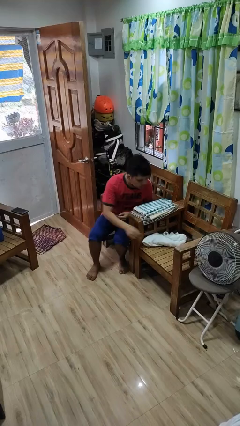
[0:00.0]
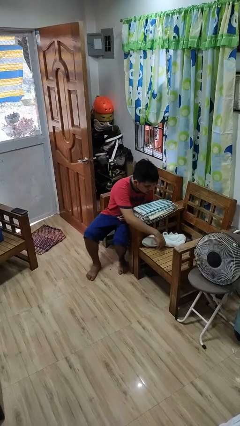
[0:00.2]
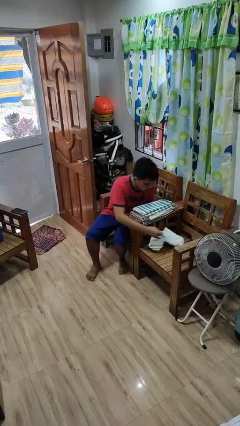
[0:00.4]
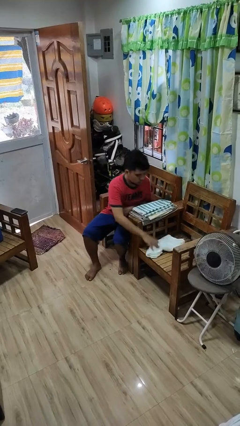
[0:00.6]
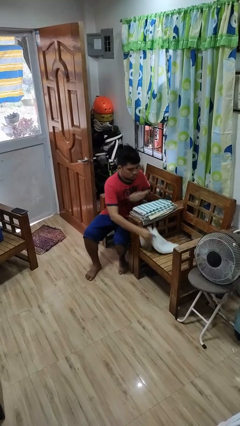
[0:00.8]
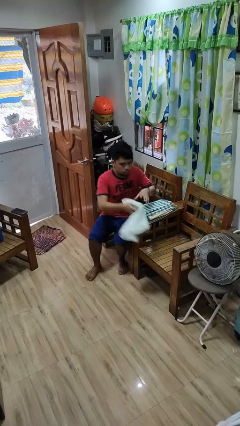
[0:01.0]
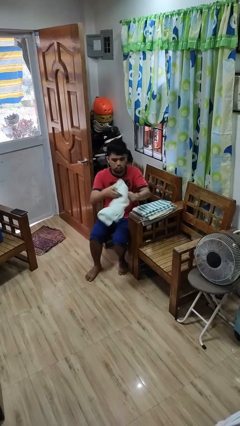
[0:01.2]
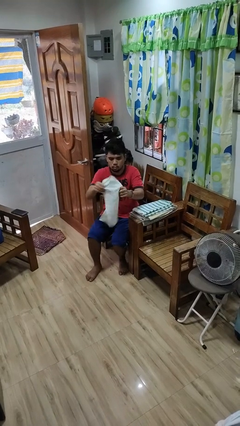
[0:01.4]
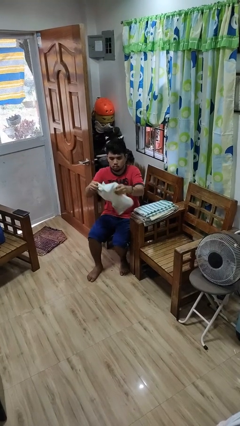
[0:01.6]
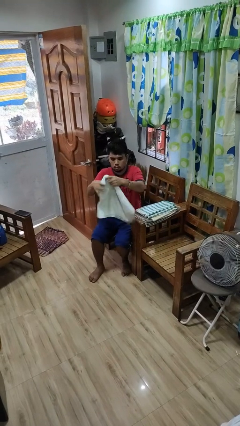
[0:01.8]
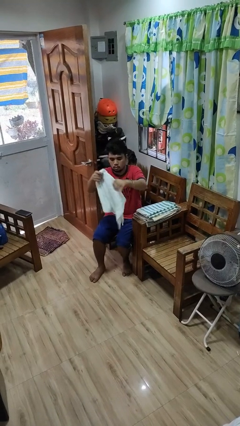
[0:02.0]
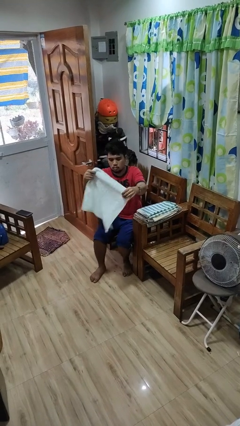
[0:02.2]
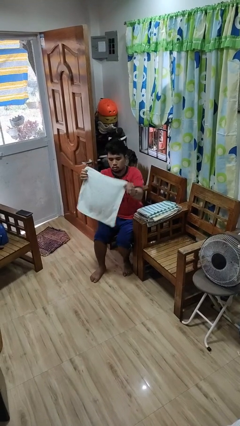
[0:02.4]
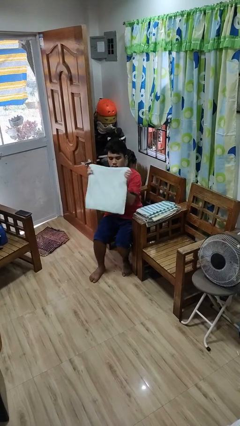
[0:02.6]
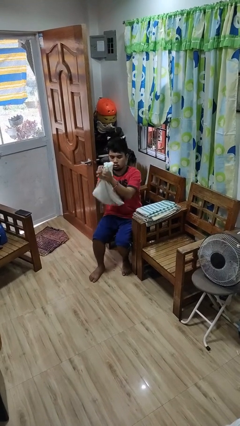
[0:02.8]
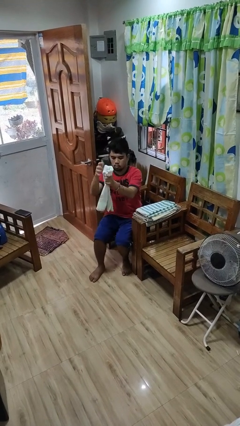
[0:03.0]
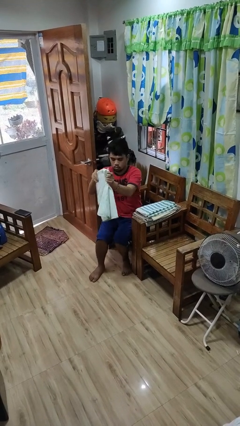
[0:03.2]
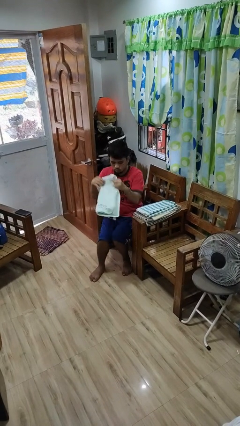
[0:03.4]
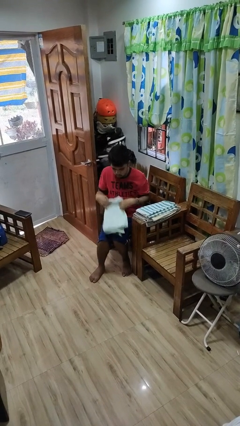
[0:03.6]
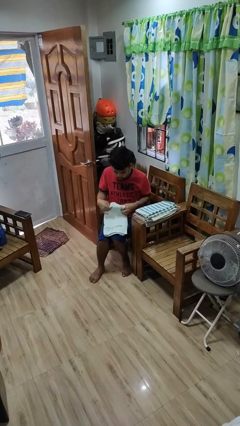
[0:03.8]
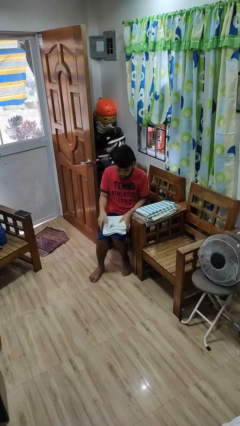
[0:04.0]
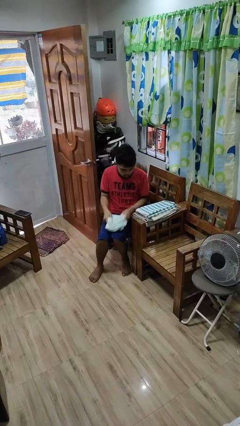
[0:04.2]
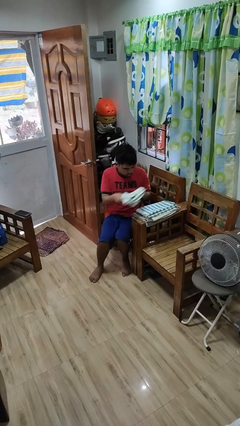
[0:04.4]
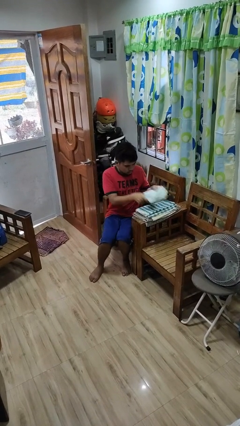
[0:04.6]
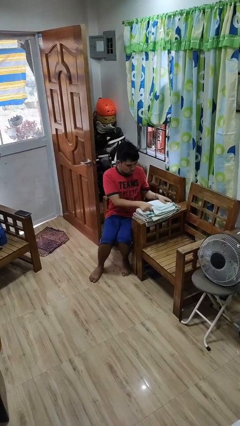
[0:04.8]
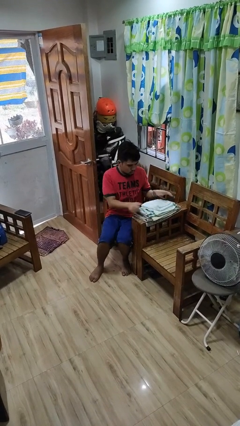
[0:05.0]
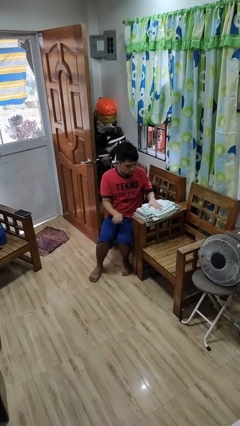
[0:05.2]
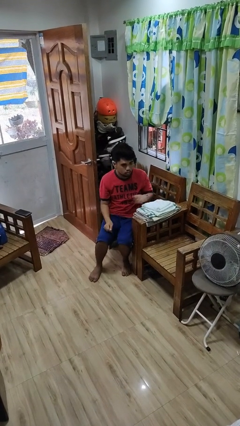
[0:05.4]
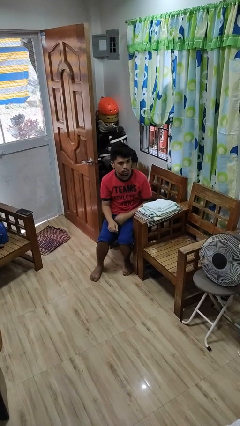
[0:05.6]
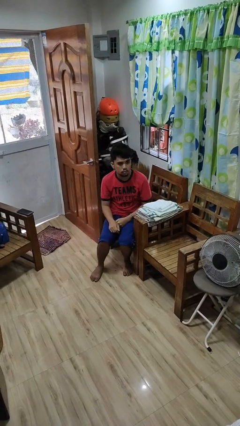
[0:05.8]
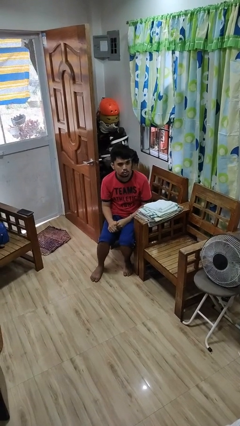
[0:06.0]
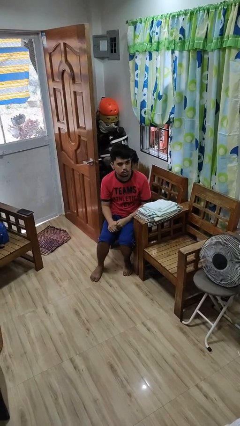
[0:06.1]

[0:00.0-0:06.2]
person folds towel

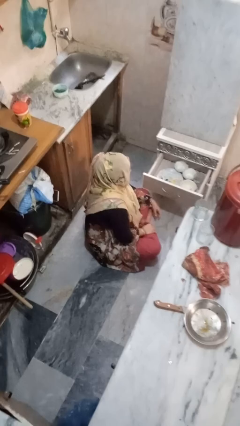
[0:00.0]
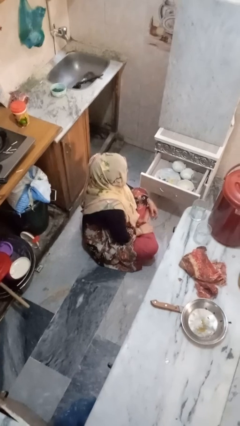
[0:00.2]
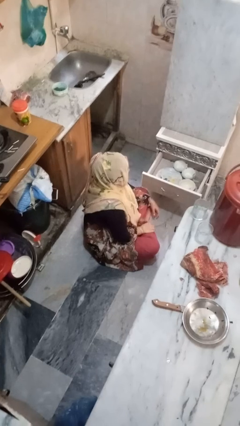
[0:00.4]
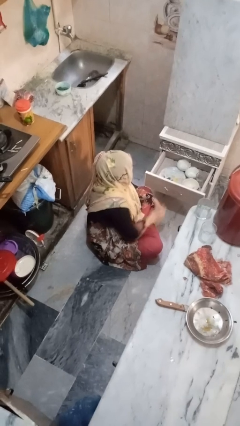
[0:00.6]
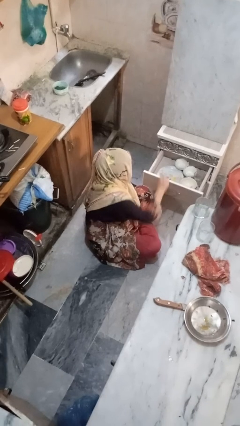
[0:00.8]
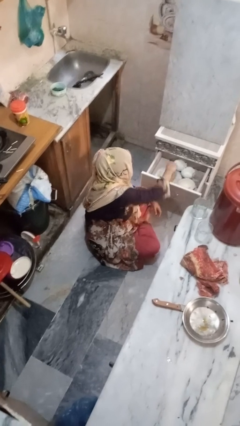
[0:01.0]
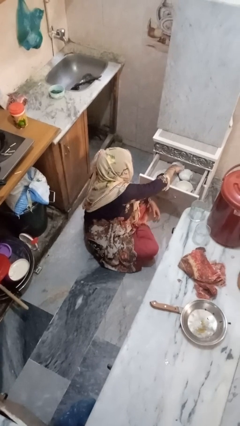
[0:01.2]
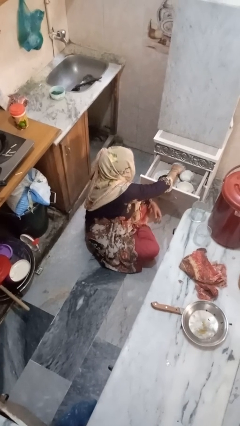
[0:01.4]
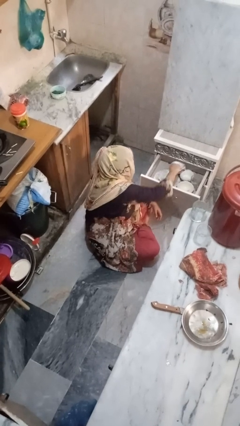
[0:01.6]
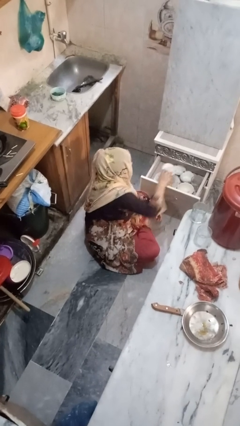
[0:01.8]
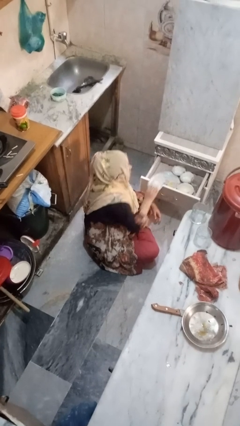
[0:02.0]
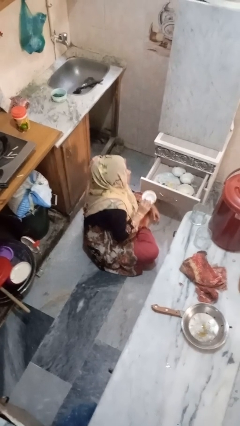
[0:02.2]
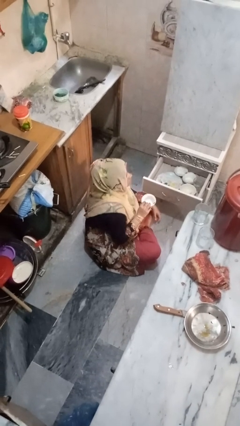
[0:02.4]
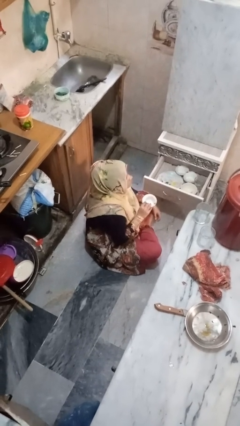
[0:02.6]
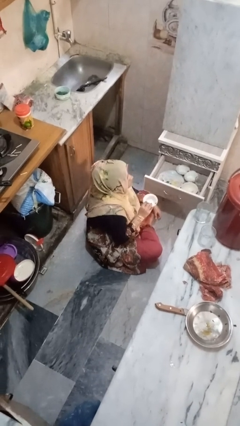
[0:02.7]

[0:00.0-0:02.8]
person takes object from kitchen drawer

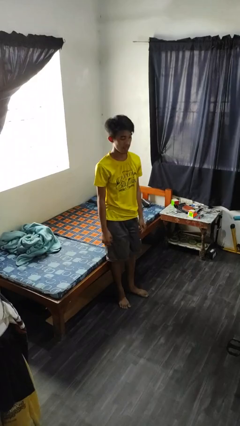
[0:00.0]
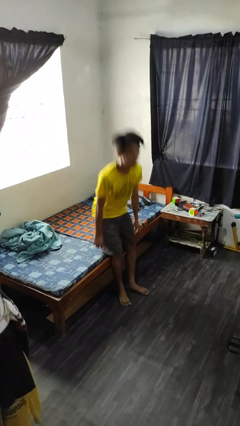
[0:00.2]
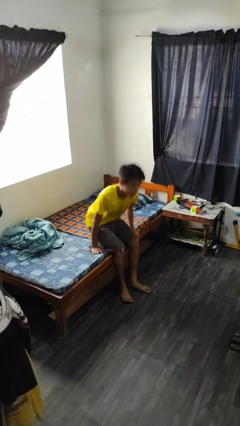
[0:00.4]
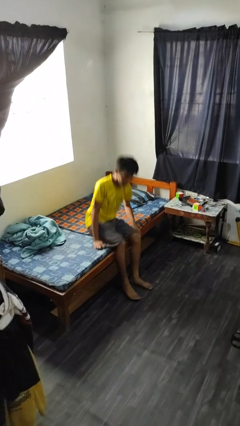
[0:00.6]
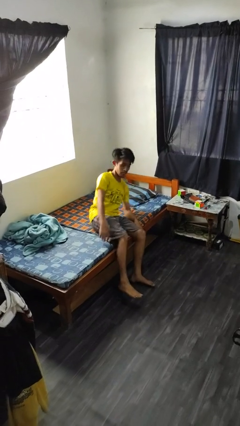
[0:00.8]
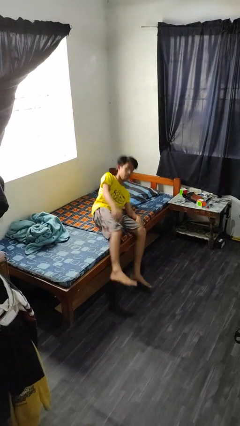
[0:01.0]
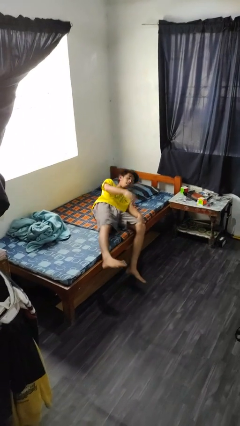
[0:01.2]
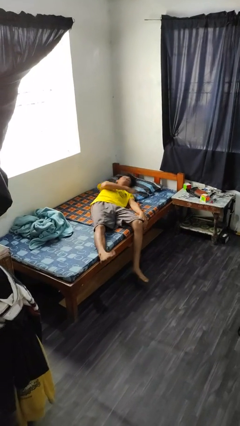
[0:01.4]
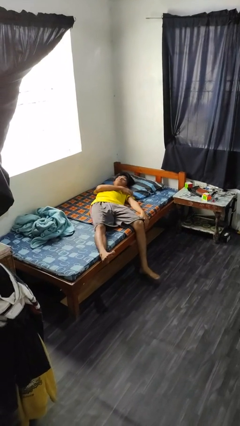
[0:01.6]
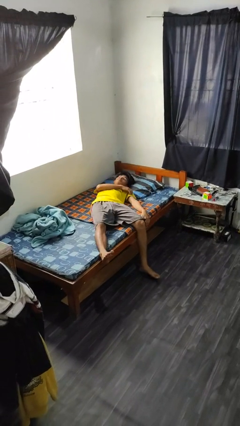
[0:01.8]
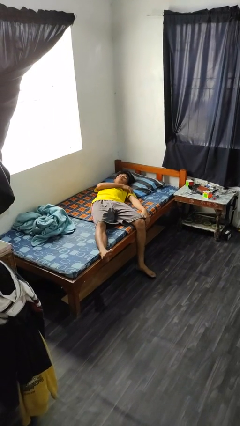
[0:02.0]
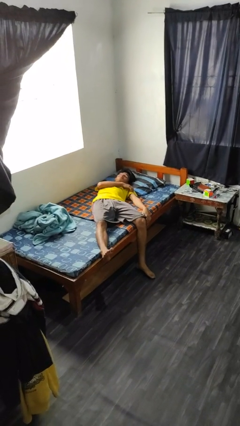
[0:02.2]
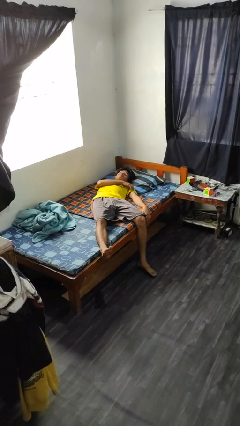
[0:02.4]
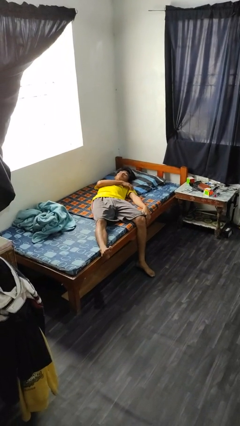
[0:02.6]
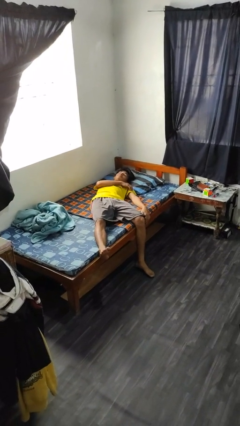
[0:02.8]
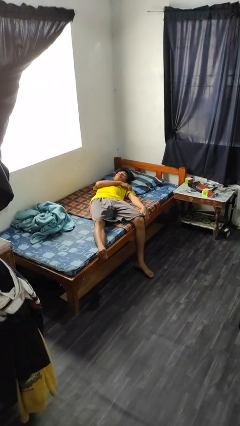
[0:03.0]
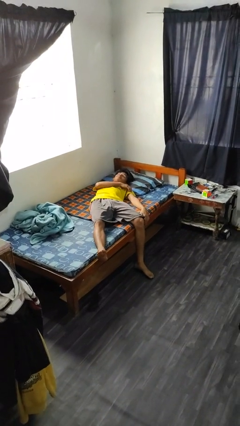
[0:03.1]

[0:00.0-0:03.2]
person lies down on bed

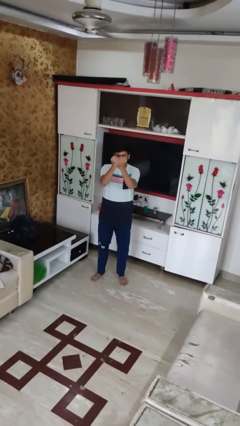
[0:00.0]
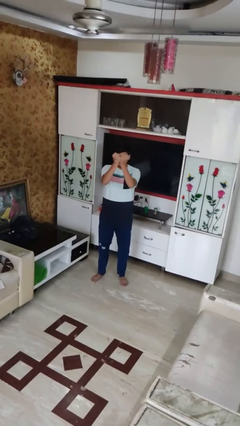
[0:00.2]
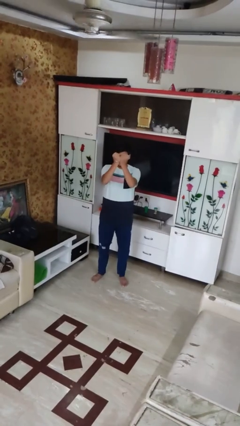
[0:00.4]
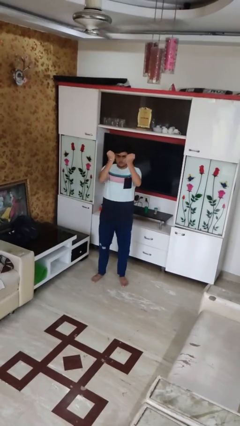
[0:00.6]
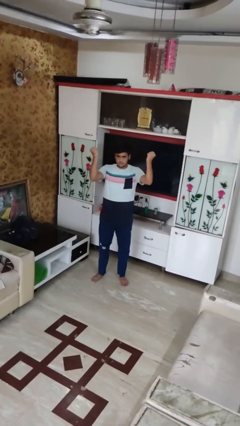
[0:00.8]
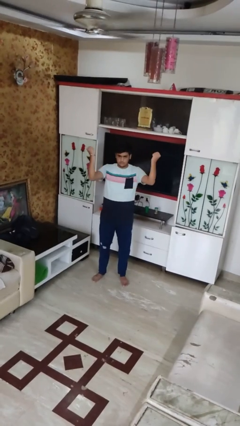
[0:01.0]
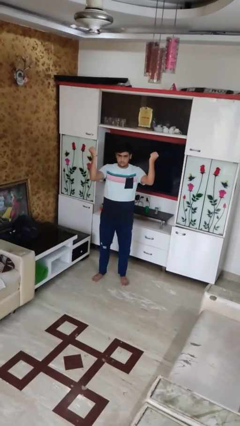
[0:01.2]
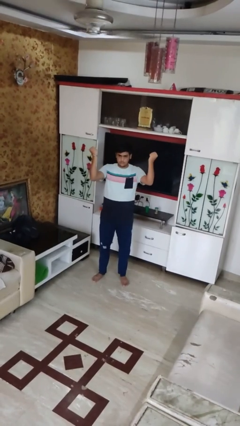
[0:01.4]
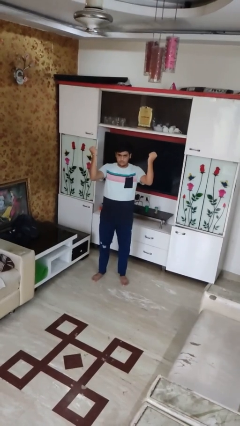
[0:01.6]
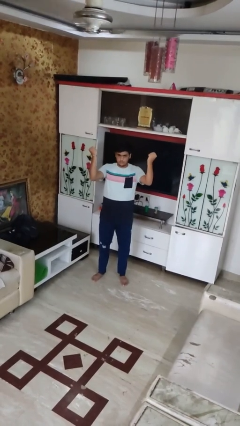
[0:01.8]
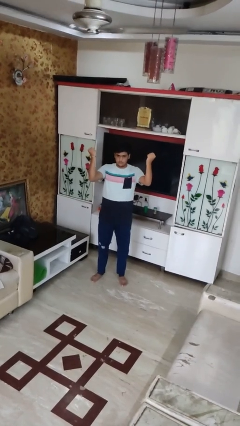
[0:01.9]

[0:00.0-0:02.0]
person gestures zoom in

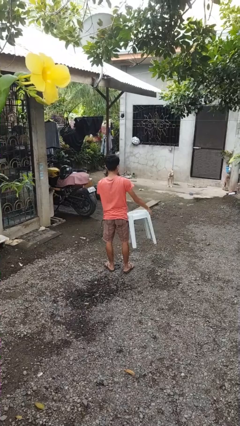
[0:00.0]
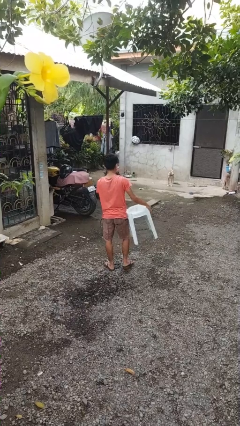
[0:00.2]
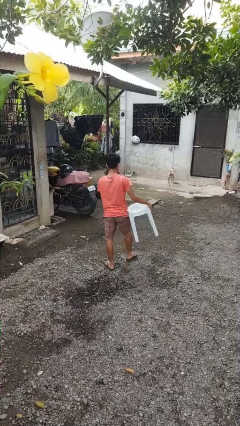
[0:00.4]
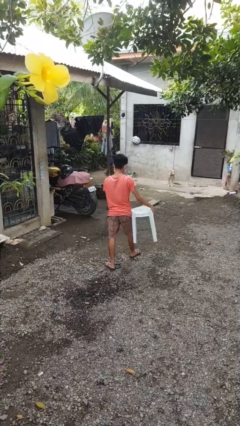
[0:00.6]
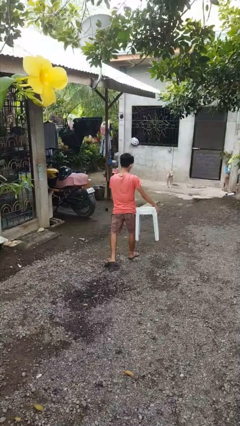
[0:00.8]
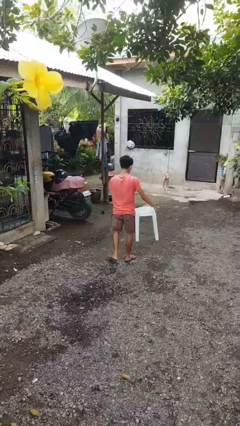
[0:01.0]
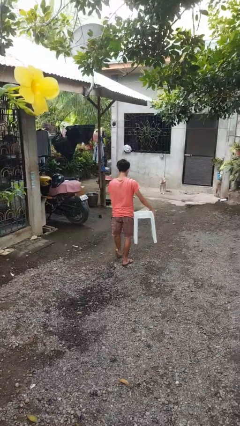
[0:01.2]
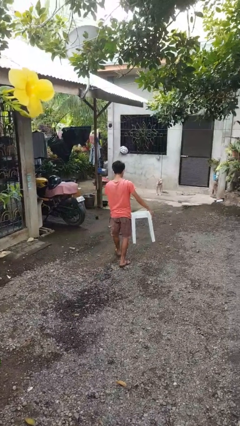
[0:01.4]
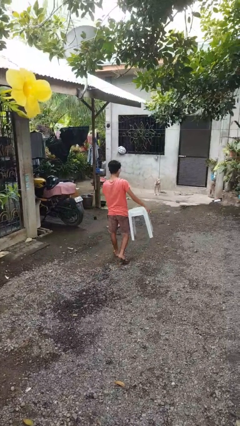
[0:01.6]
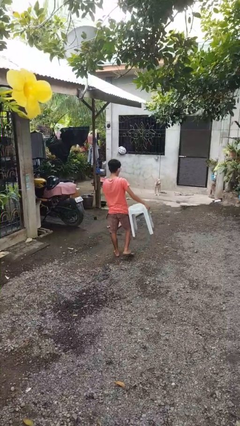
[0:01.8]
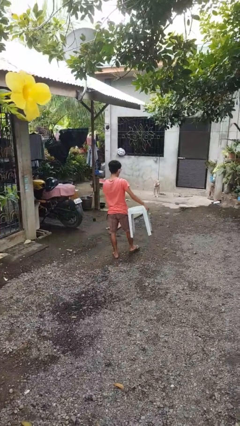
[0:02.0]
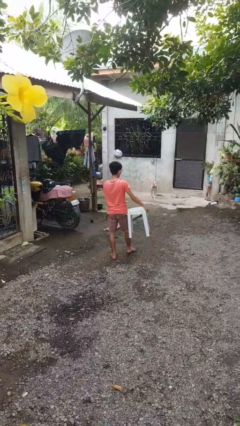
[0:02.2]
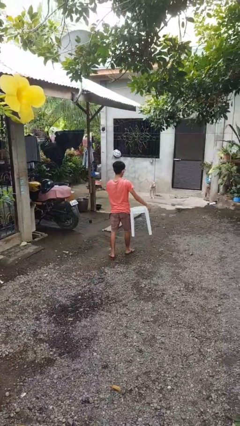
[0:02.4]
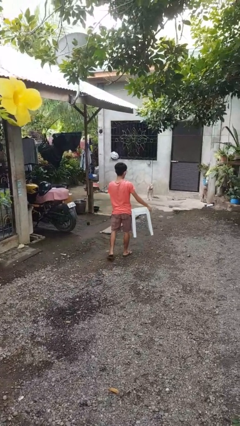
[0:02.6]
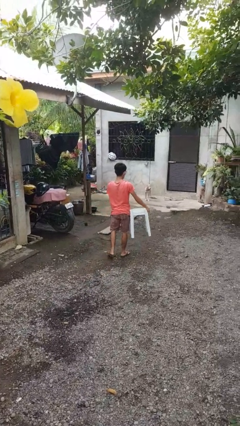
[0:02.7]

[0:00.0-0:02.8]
person carries furniture

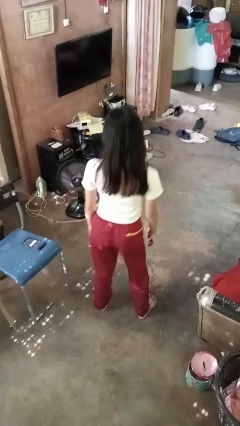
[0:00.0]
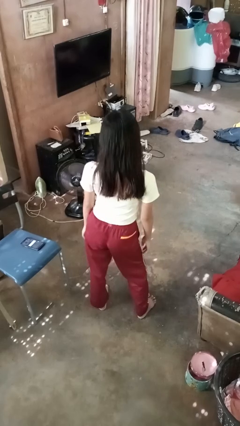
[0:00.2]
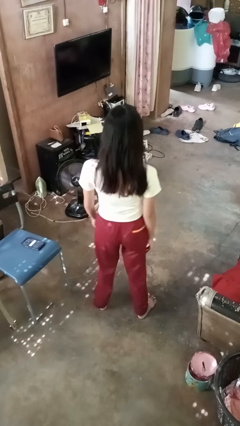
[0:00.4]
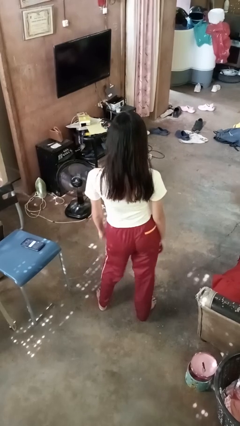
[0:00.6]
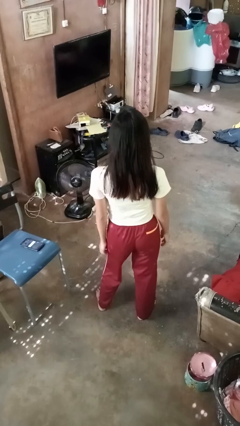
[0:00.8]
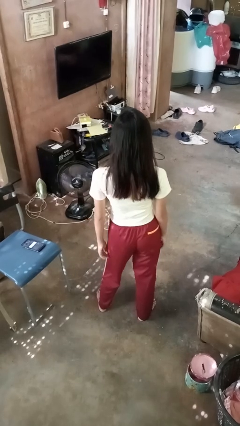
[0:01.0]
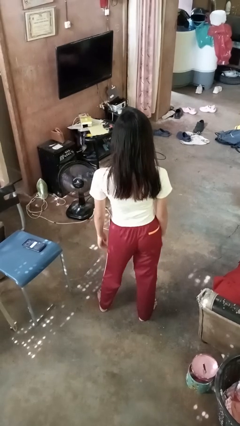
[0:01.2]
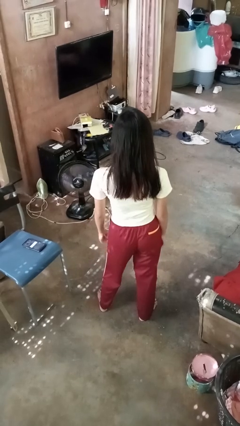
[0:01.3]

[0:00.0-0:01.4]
person wiggles hips
